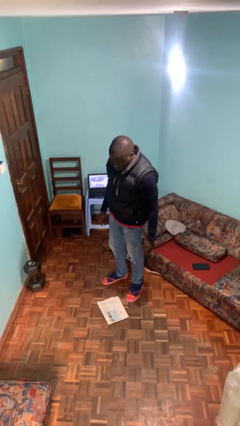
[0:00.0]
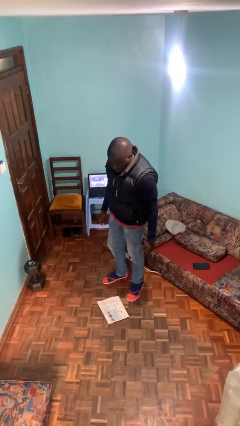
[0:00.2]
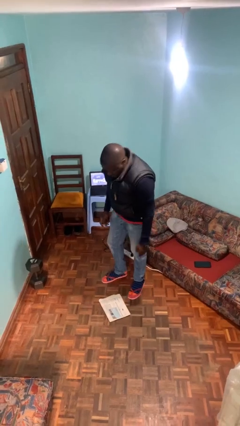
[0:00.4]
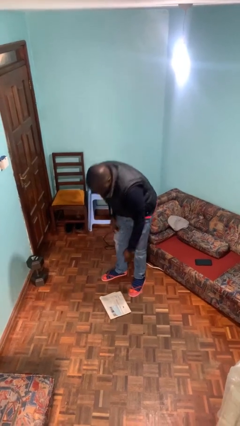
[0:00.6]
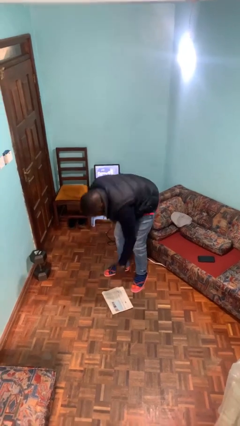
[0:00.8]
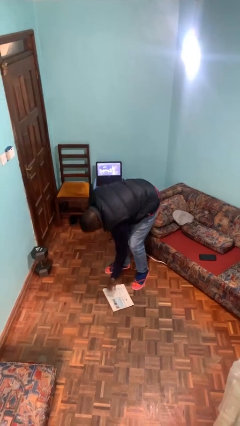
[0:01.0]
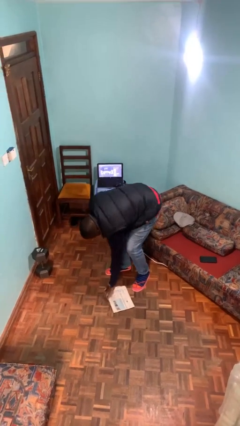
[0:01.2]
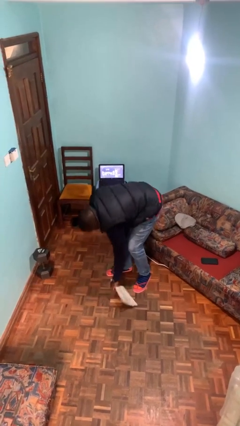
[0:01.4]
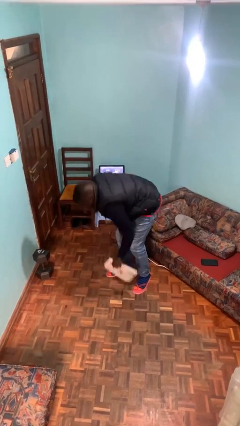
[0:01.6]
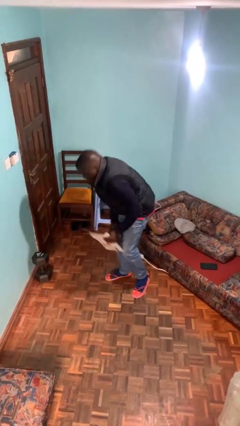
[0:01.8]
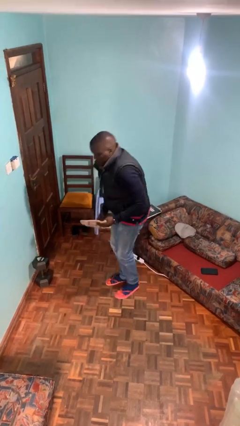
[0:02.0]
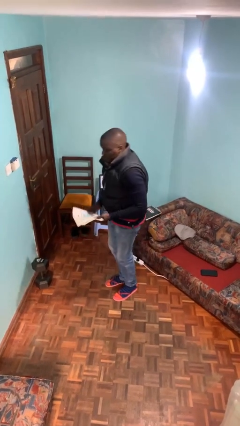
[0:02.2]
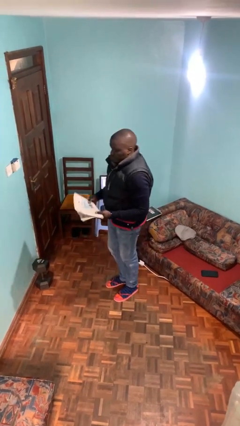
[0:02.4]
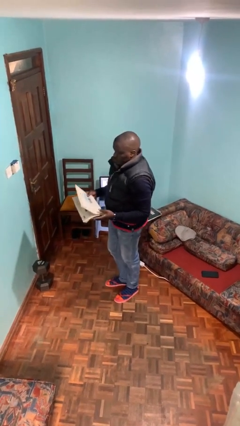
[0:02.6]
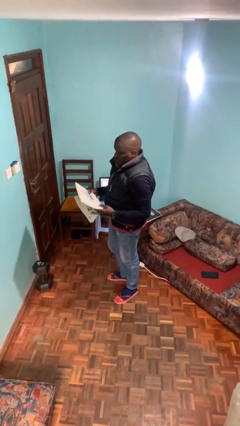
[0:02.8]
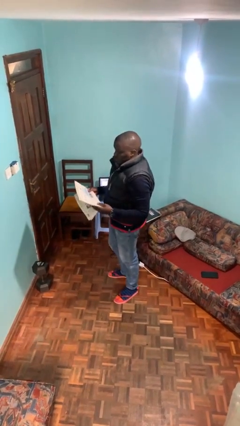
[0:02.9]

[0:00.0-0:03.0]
person picks up object from floor

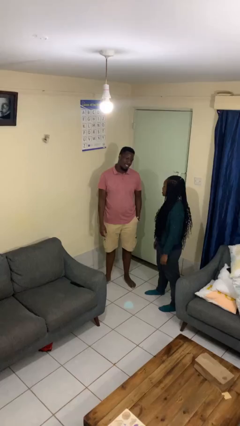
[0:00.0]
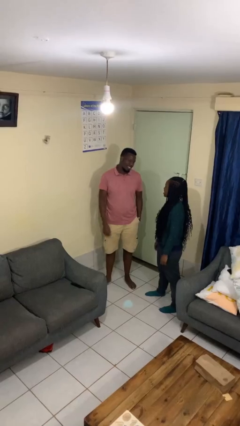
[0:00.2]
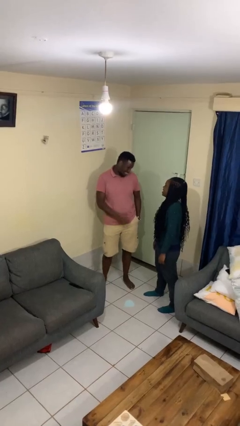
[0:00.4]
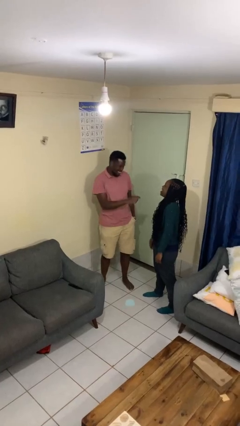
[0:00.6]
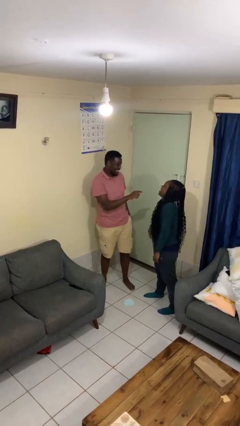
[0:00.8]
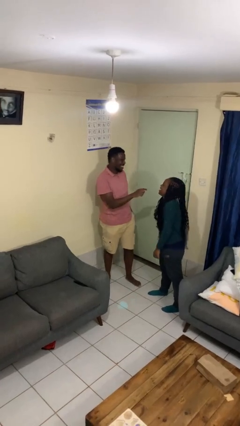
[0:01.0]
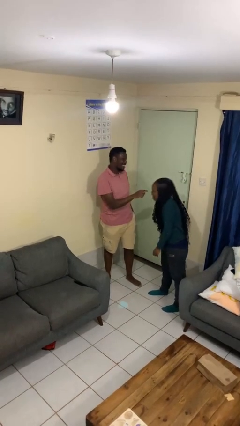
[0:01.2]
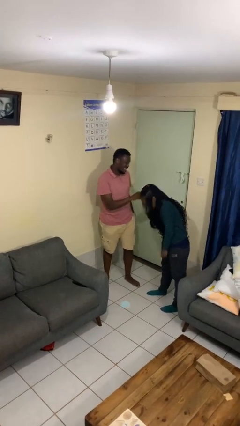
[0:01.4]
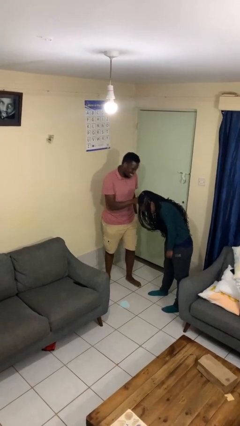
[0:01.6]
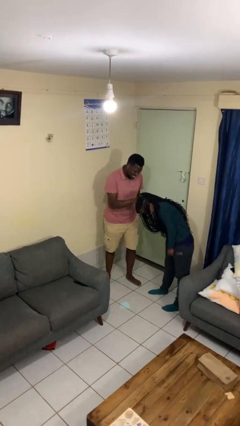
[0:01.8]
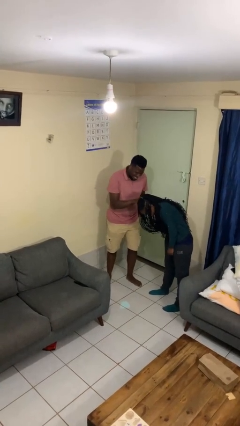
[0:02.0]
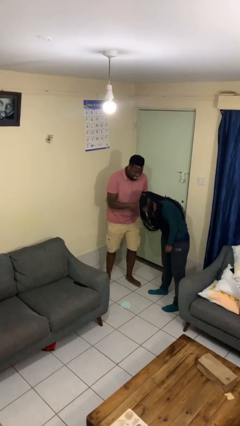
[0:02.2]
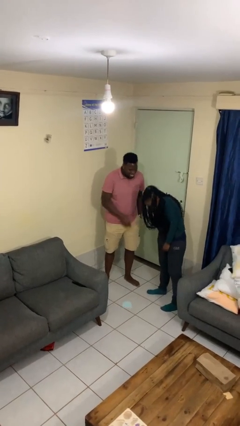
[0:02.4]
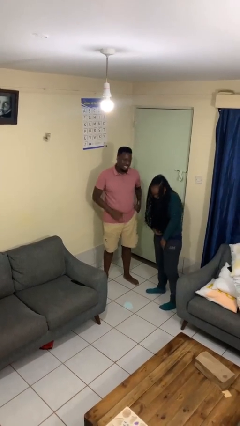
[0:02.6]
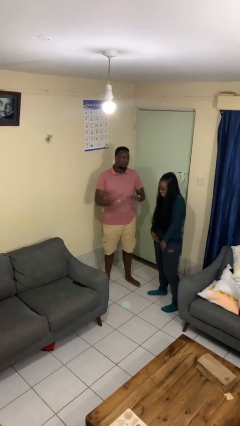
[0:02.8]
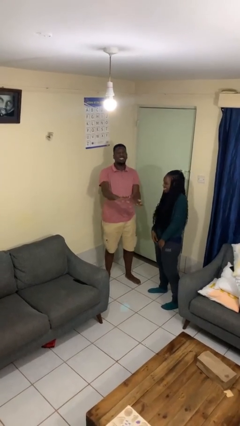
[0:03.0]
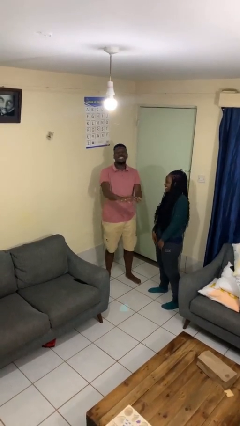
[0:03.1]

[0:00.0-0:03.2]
person laughs with person

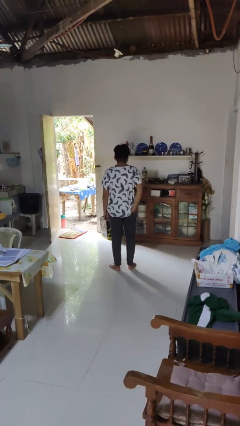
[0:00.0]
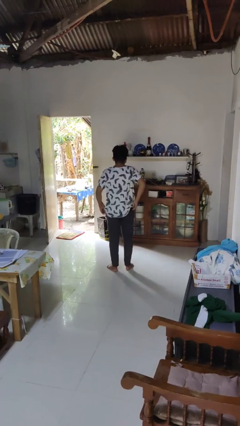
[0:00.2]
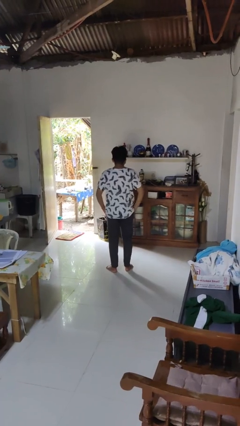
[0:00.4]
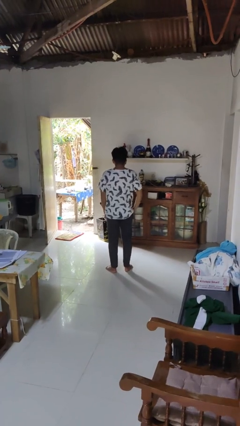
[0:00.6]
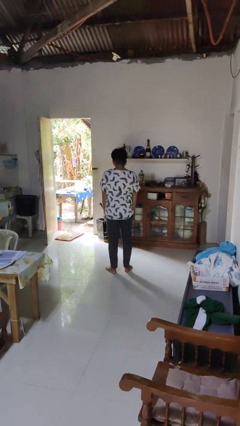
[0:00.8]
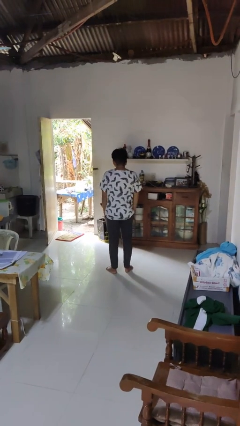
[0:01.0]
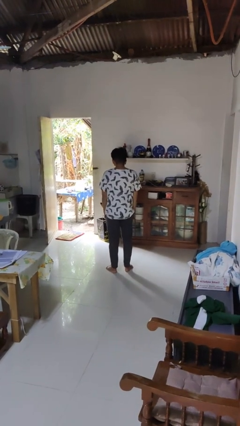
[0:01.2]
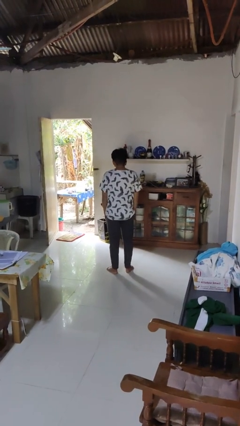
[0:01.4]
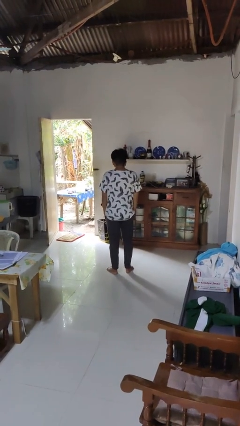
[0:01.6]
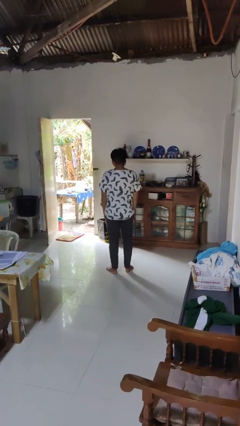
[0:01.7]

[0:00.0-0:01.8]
person puts hands in back pockets

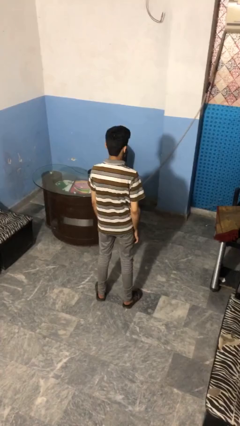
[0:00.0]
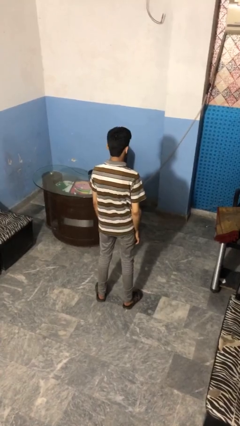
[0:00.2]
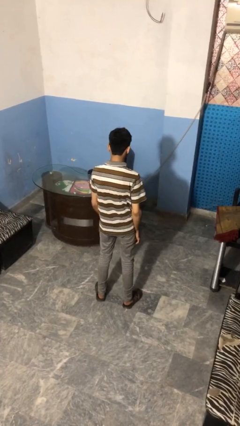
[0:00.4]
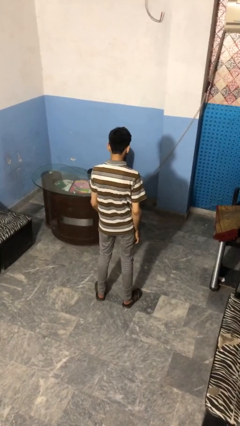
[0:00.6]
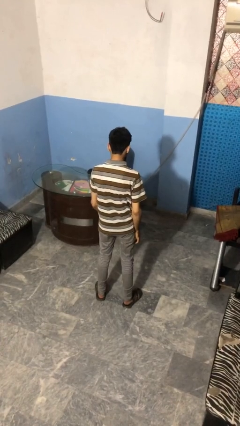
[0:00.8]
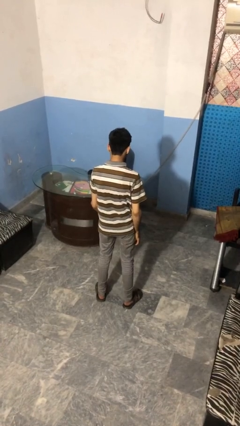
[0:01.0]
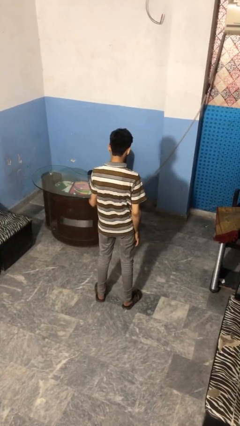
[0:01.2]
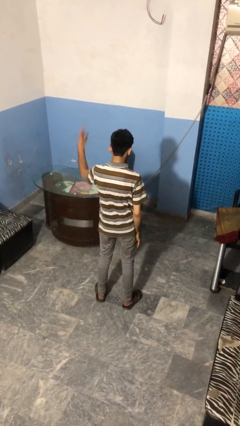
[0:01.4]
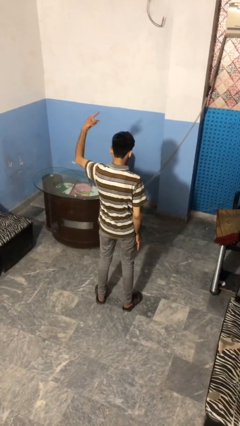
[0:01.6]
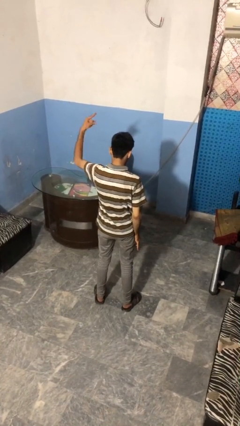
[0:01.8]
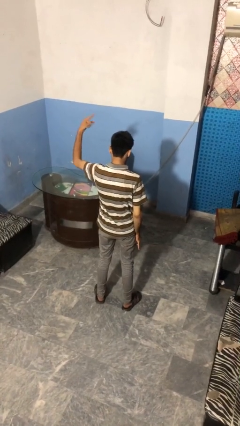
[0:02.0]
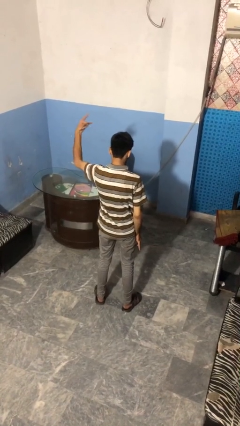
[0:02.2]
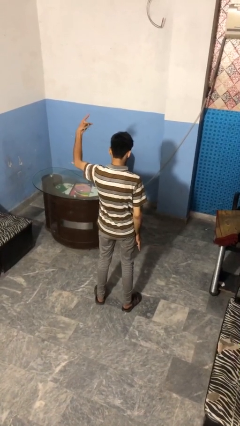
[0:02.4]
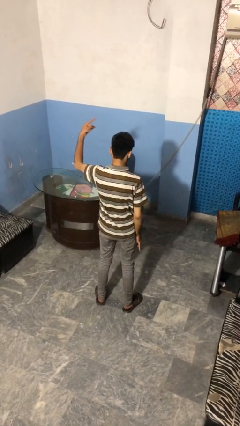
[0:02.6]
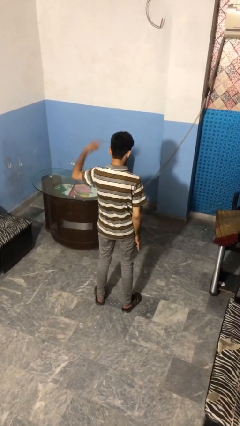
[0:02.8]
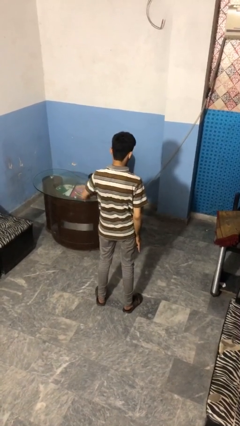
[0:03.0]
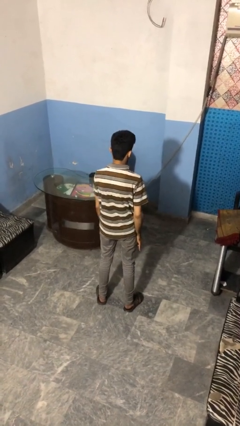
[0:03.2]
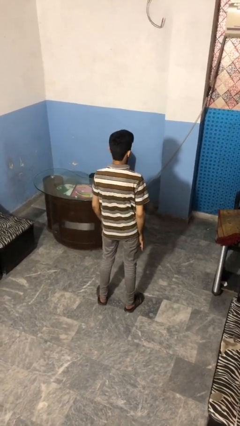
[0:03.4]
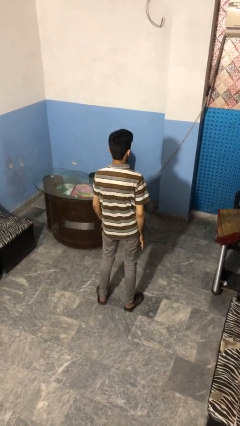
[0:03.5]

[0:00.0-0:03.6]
person gestures hang loose

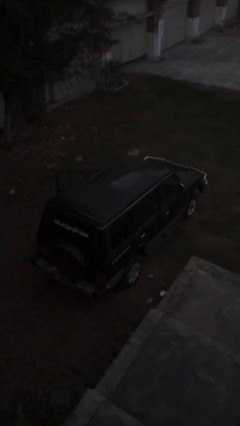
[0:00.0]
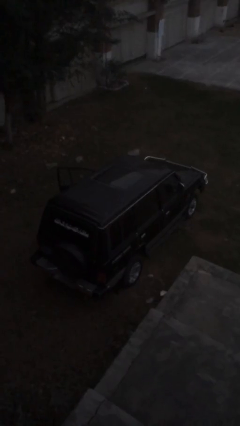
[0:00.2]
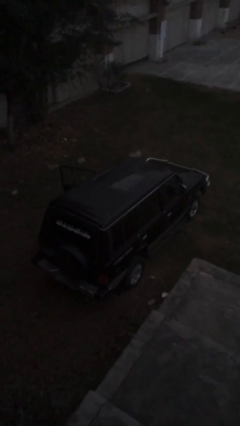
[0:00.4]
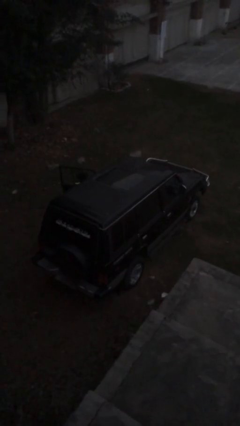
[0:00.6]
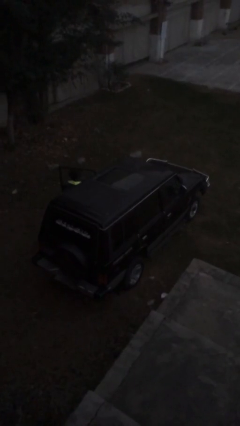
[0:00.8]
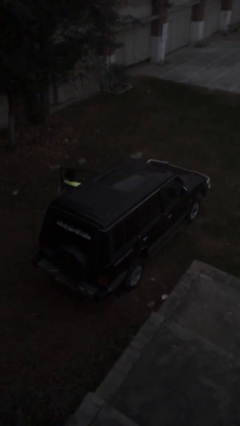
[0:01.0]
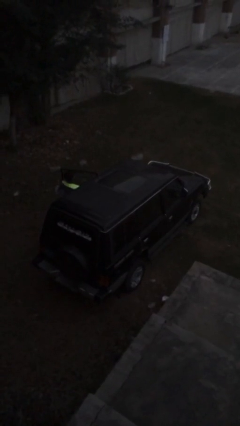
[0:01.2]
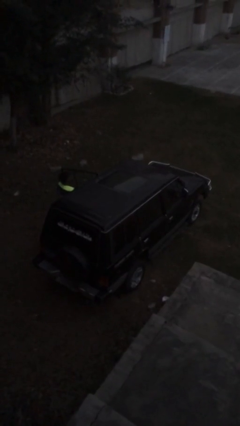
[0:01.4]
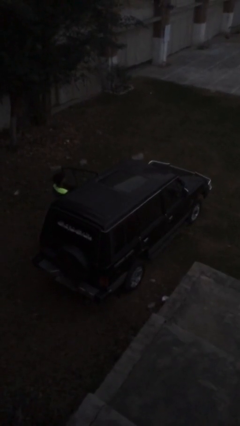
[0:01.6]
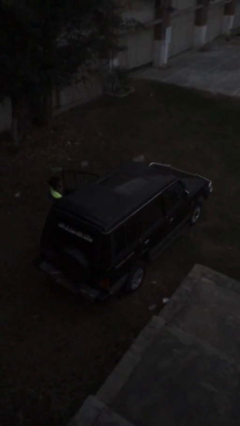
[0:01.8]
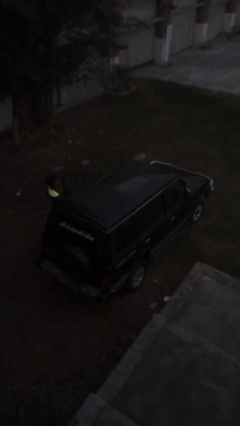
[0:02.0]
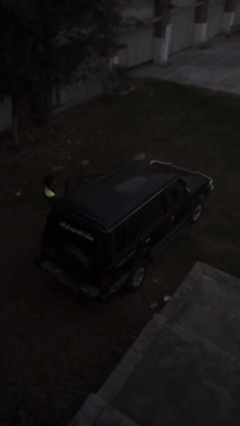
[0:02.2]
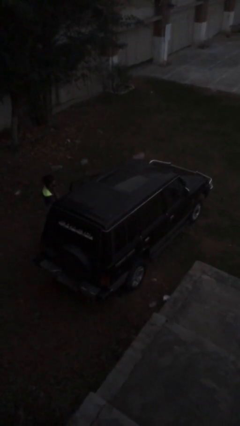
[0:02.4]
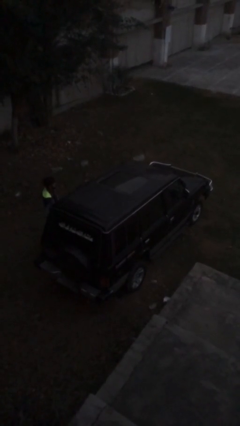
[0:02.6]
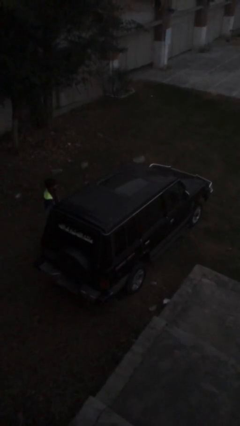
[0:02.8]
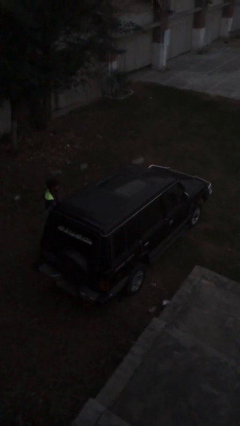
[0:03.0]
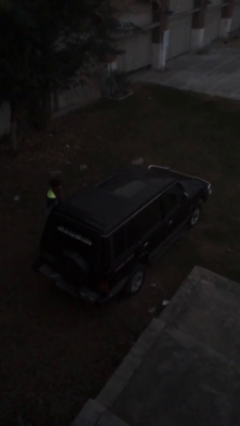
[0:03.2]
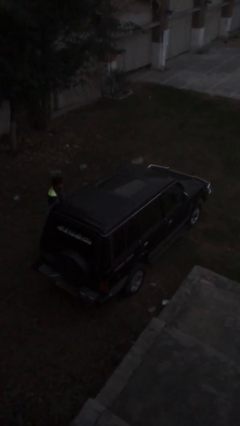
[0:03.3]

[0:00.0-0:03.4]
car drops off person

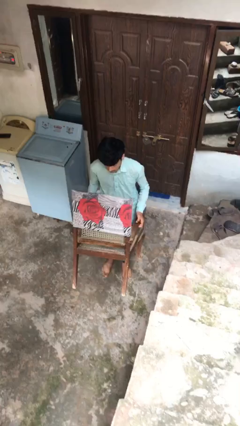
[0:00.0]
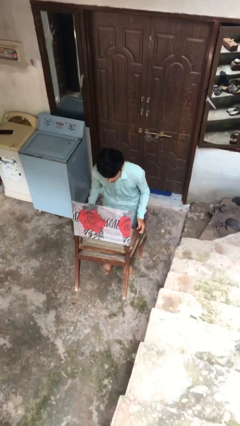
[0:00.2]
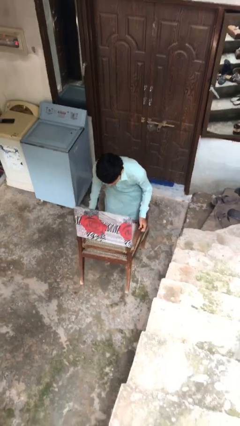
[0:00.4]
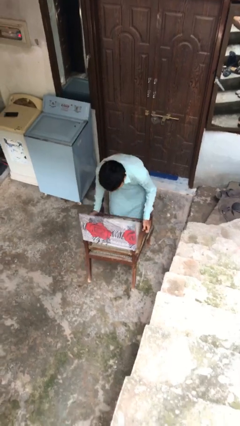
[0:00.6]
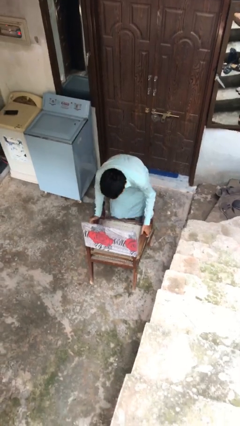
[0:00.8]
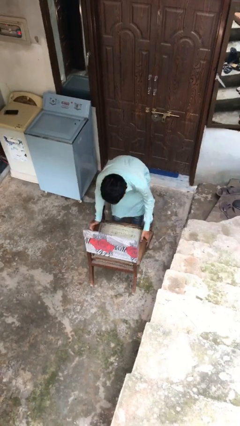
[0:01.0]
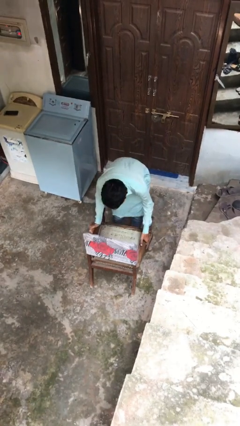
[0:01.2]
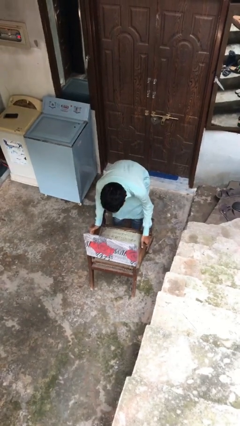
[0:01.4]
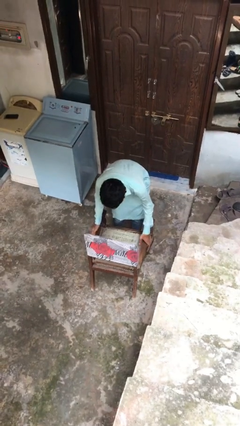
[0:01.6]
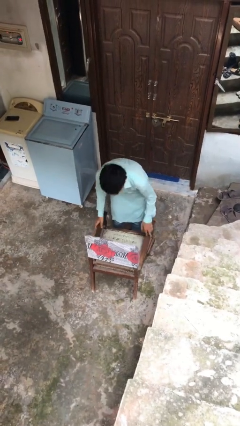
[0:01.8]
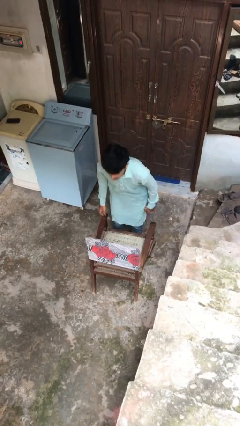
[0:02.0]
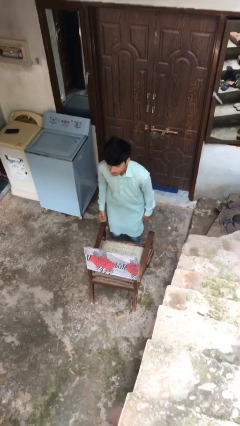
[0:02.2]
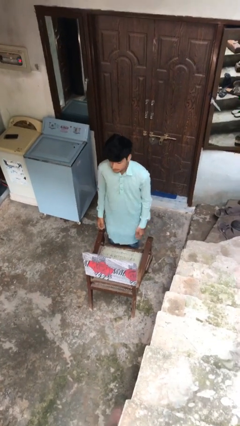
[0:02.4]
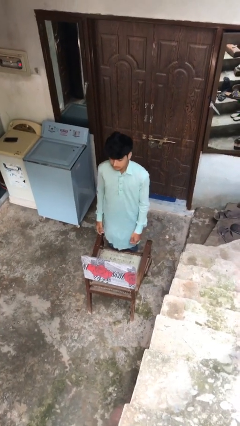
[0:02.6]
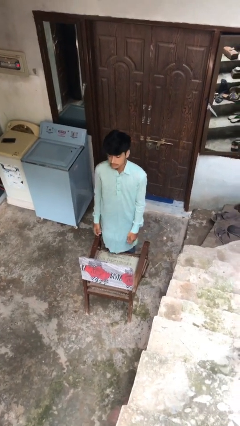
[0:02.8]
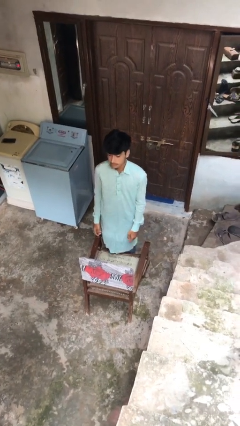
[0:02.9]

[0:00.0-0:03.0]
person puts down object on floor
